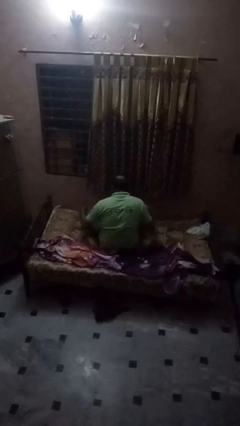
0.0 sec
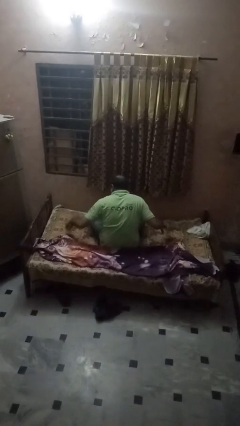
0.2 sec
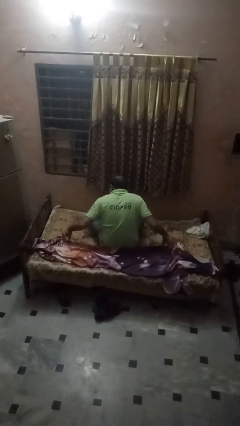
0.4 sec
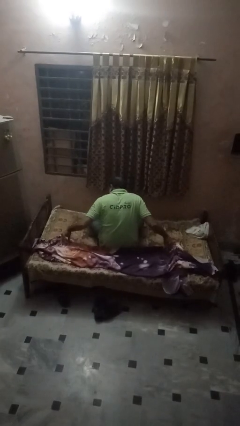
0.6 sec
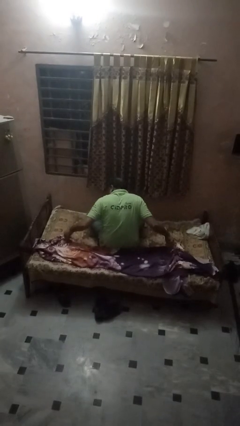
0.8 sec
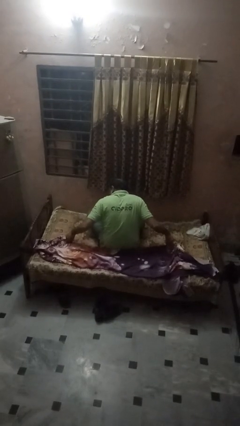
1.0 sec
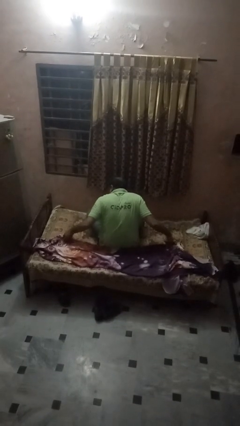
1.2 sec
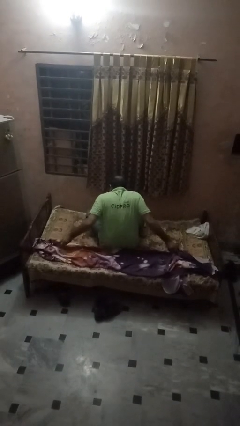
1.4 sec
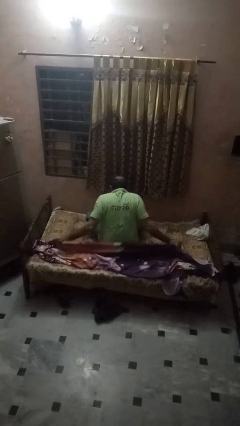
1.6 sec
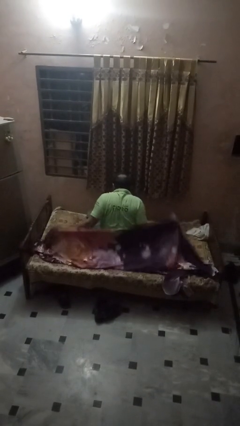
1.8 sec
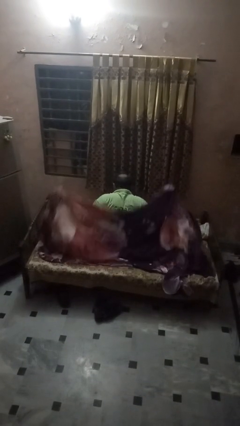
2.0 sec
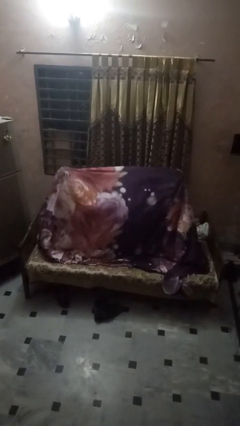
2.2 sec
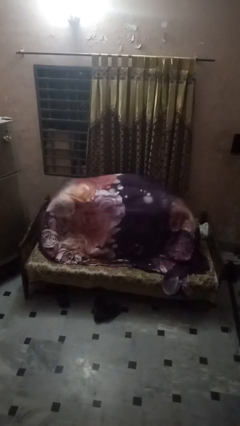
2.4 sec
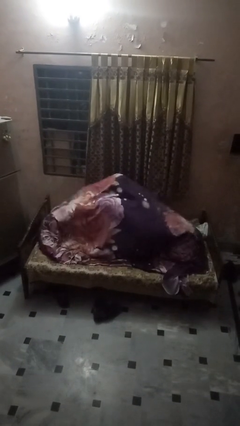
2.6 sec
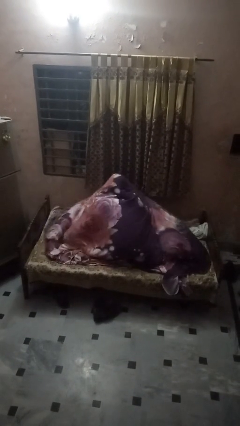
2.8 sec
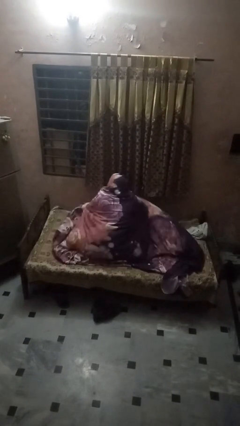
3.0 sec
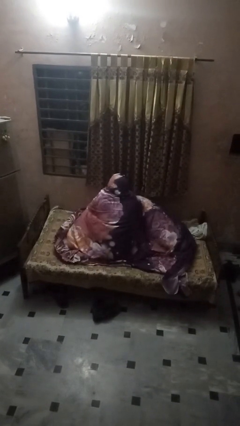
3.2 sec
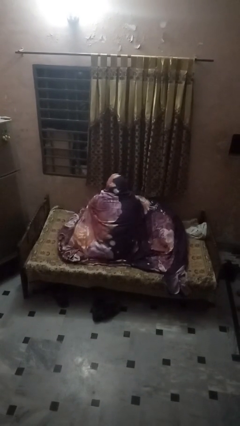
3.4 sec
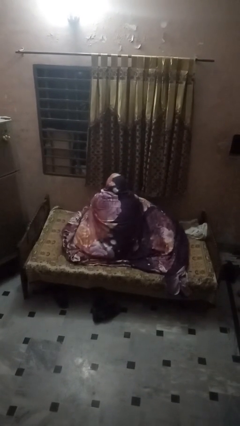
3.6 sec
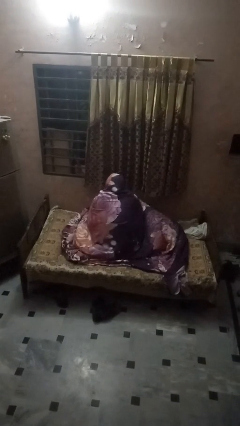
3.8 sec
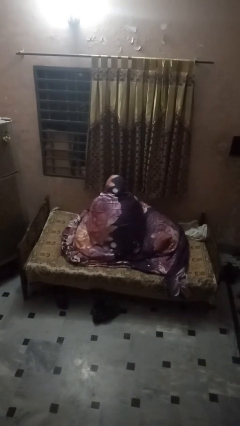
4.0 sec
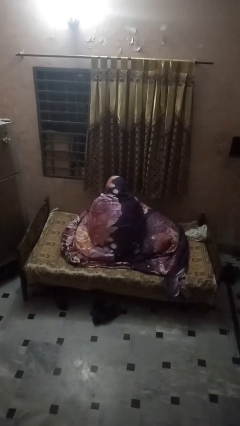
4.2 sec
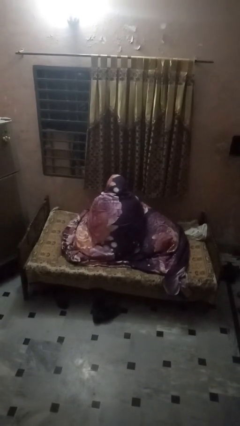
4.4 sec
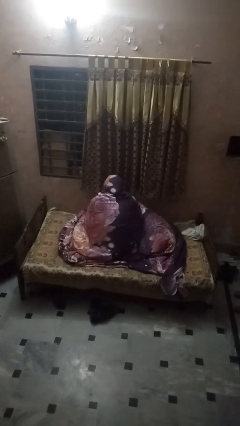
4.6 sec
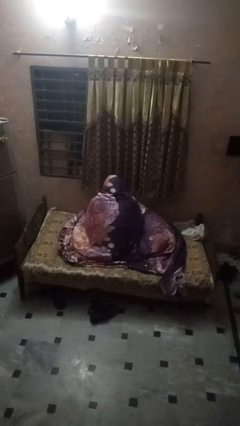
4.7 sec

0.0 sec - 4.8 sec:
person covers with bedsheets

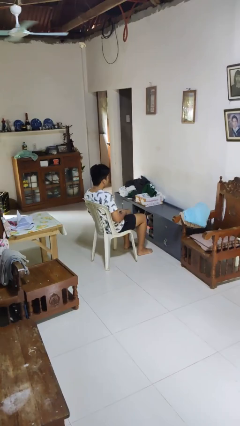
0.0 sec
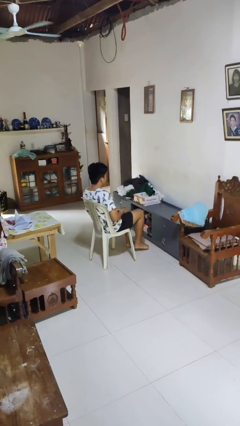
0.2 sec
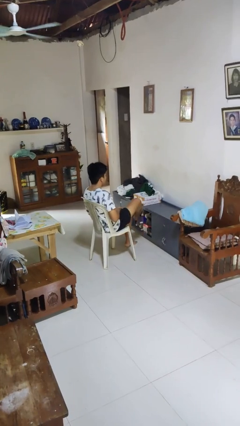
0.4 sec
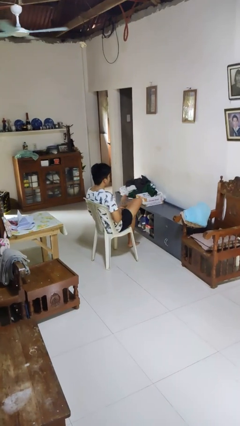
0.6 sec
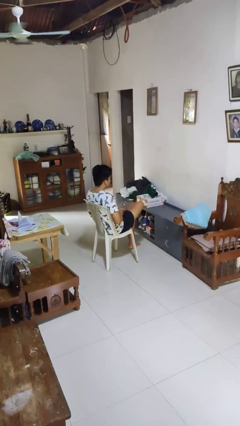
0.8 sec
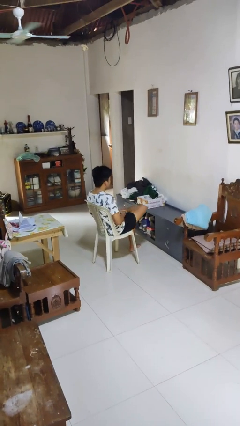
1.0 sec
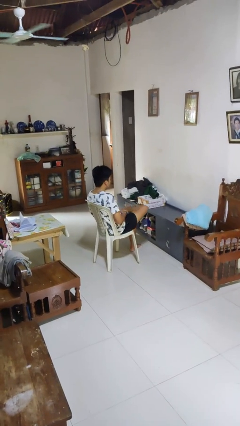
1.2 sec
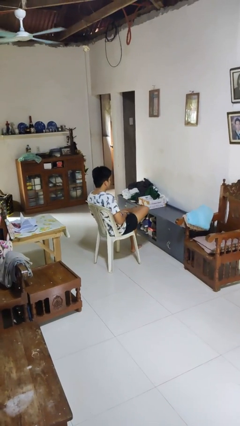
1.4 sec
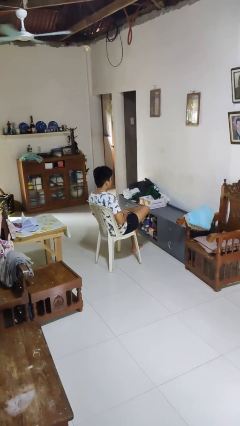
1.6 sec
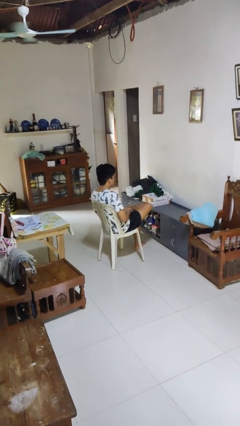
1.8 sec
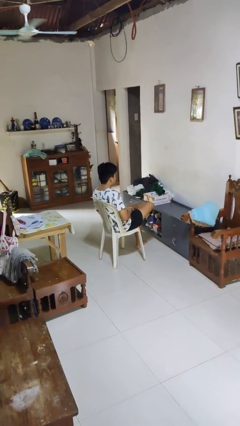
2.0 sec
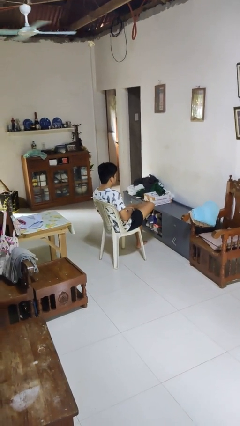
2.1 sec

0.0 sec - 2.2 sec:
person crosses legs

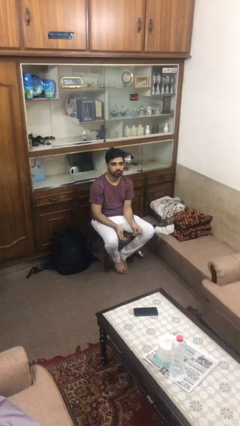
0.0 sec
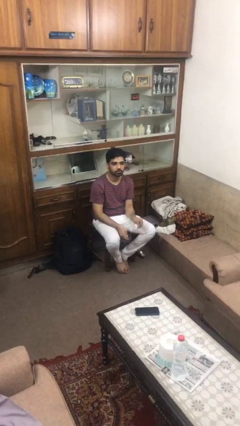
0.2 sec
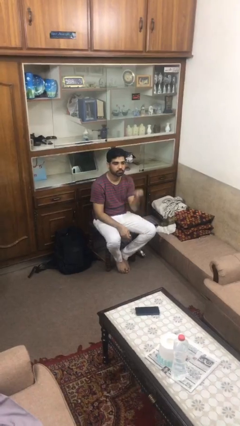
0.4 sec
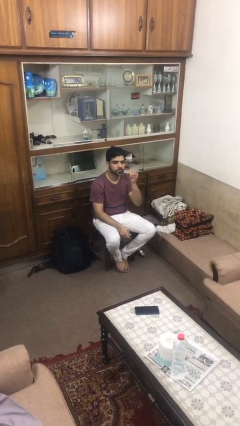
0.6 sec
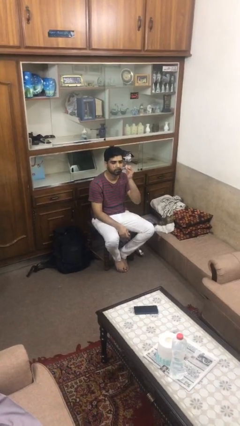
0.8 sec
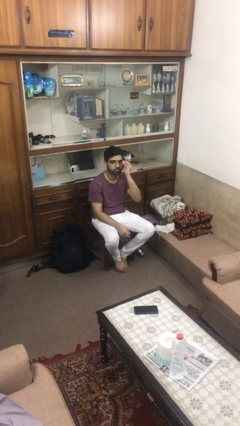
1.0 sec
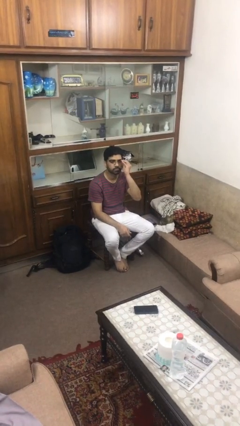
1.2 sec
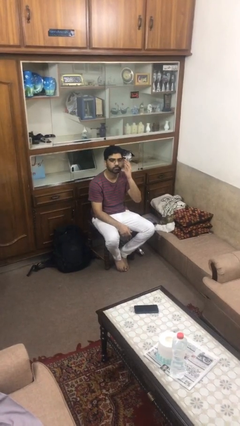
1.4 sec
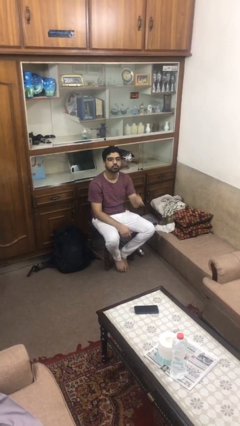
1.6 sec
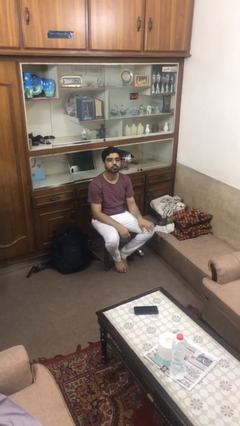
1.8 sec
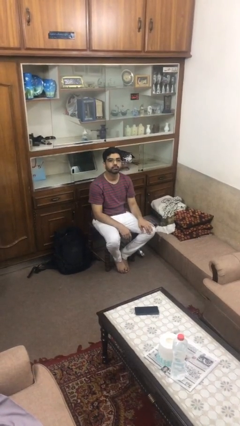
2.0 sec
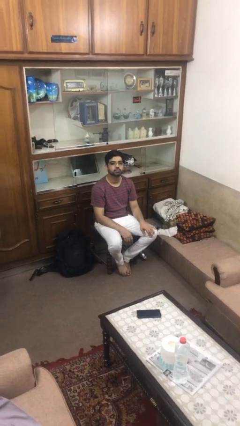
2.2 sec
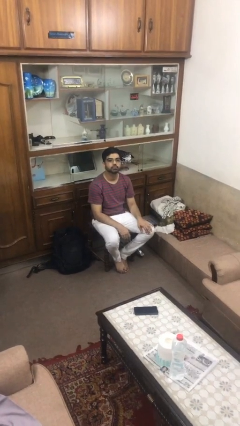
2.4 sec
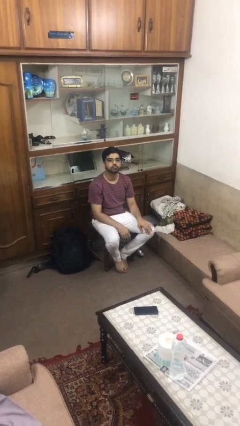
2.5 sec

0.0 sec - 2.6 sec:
person puts on glasses

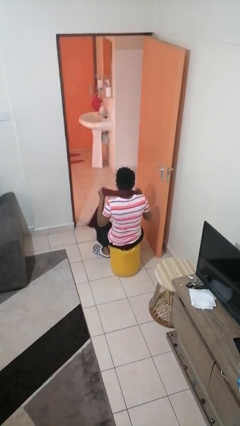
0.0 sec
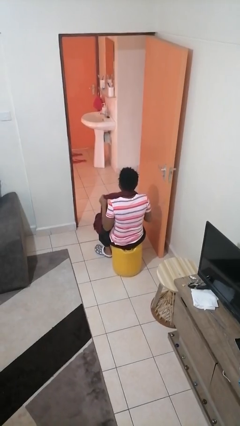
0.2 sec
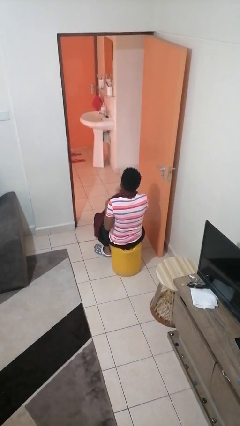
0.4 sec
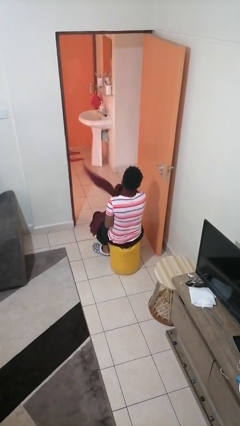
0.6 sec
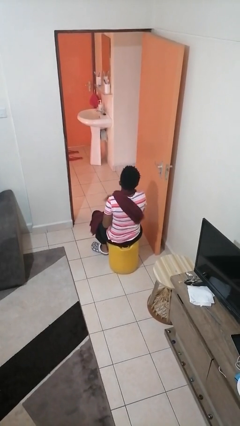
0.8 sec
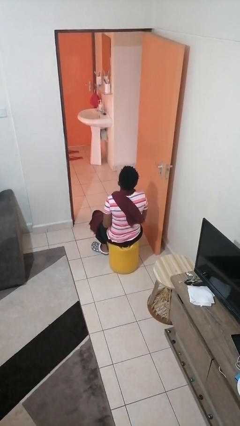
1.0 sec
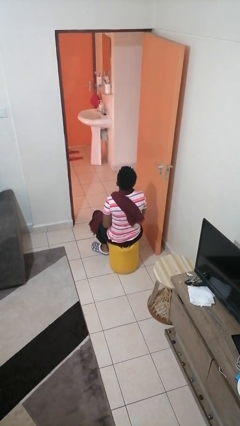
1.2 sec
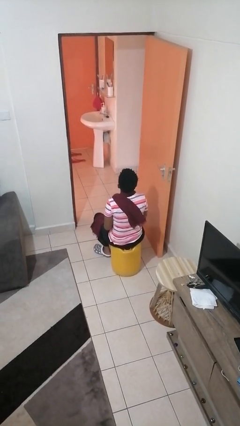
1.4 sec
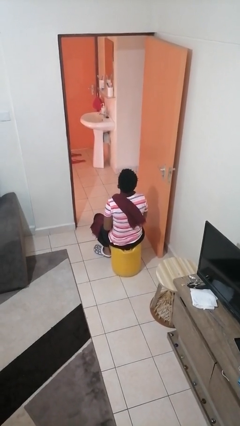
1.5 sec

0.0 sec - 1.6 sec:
person puts on scarf

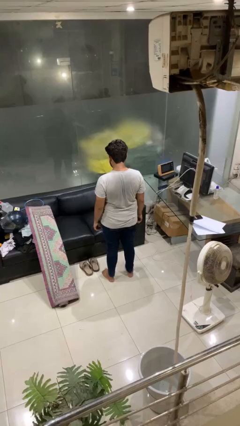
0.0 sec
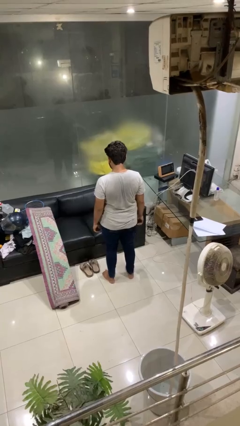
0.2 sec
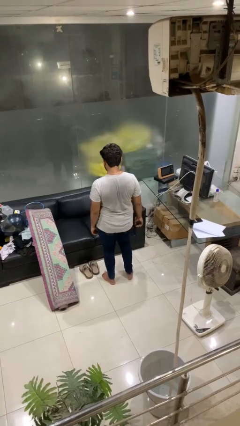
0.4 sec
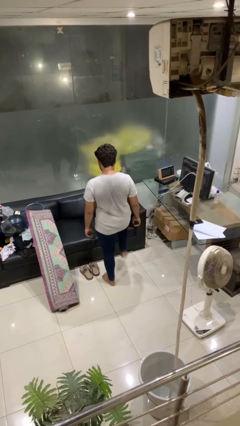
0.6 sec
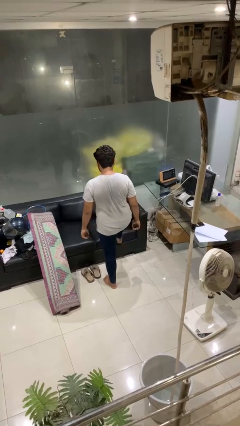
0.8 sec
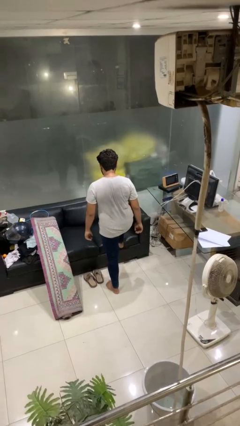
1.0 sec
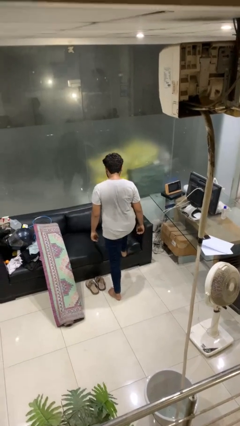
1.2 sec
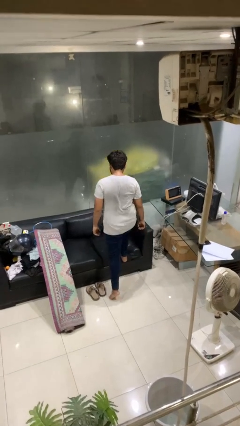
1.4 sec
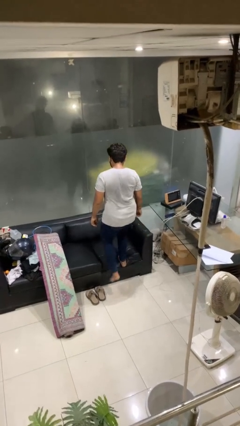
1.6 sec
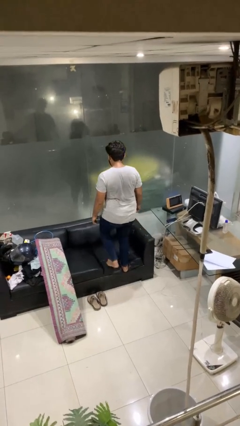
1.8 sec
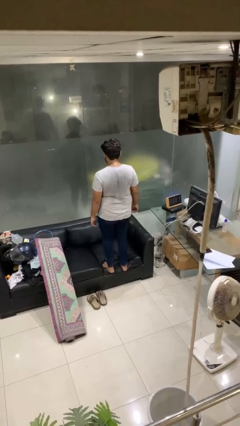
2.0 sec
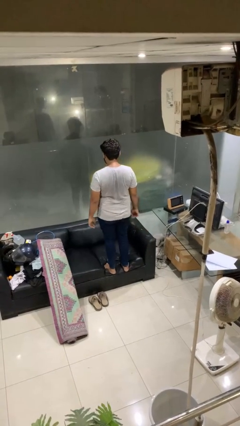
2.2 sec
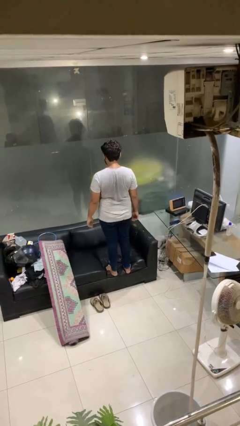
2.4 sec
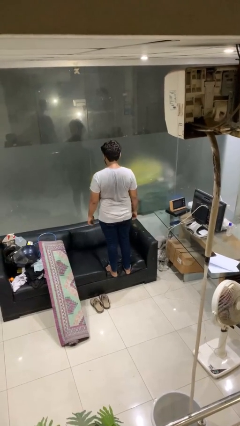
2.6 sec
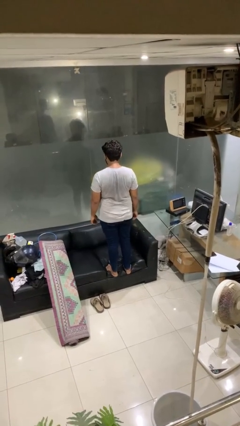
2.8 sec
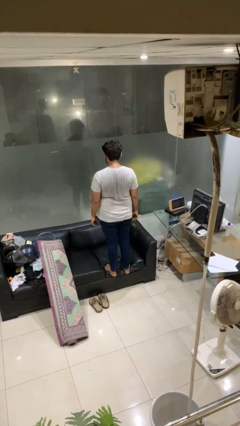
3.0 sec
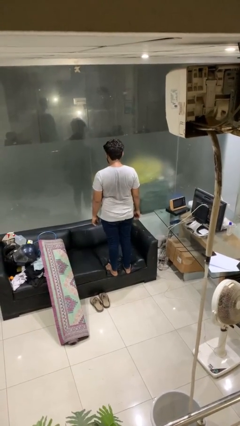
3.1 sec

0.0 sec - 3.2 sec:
person climbs on couch

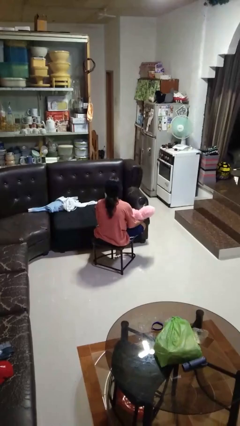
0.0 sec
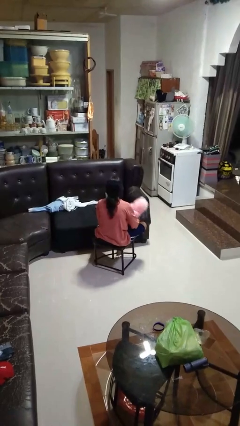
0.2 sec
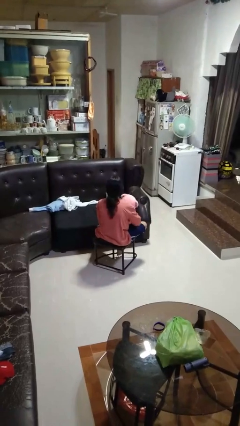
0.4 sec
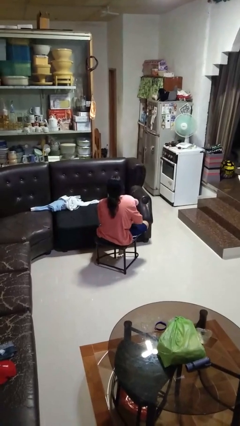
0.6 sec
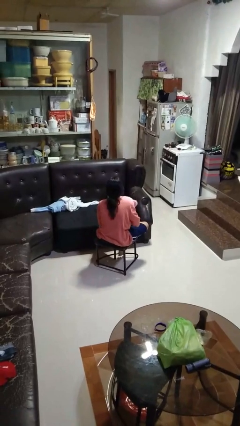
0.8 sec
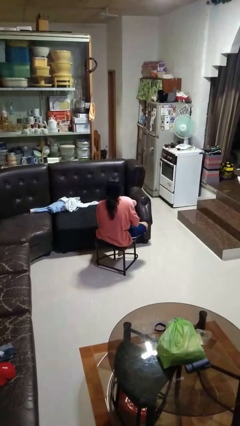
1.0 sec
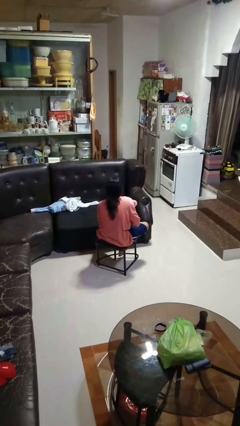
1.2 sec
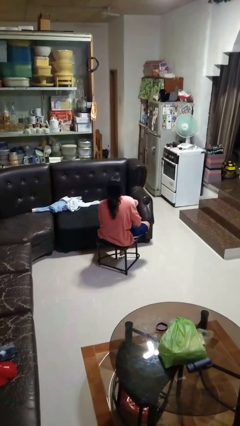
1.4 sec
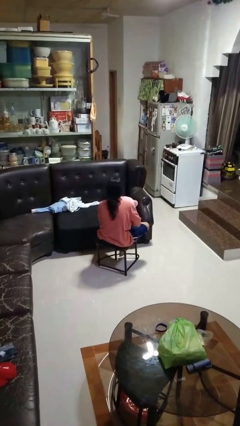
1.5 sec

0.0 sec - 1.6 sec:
person hugs stuffed animal

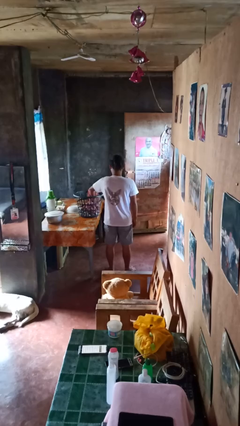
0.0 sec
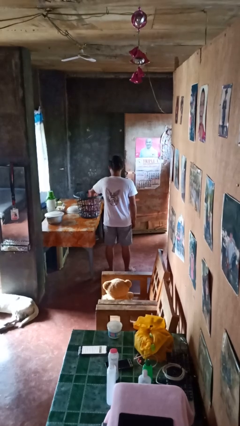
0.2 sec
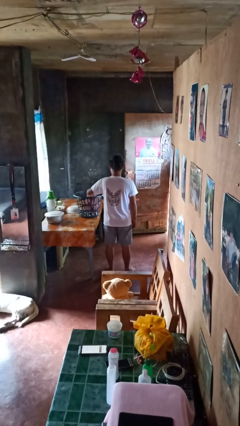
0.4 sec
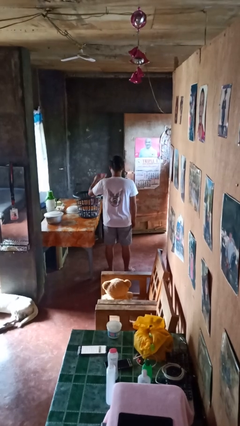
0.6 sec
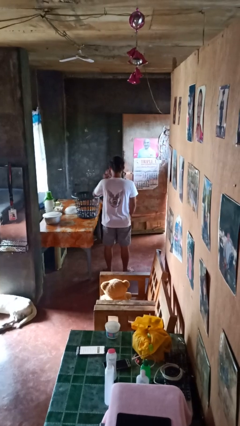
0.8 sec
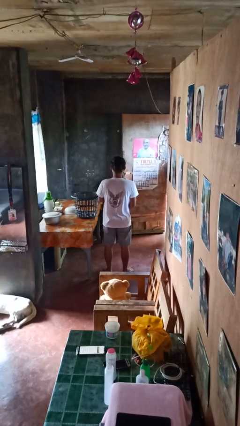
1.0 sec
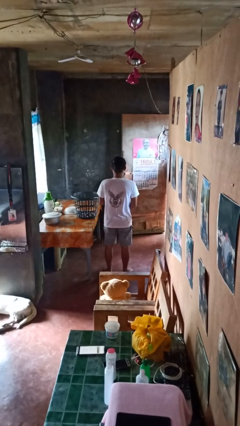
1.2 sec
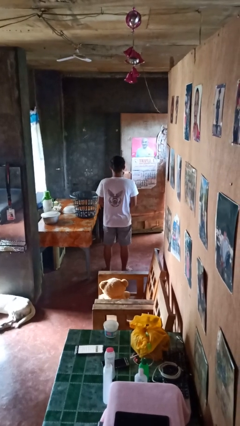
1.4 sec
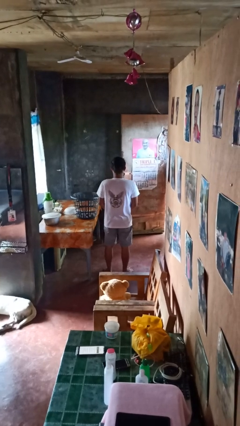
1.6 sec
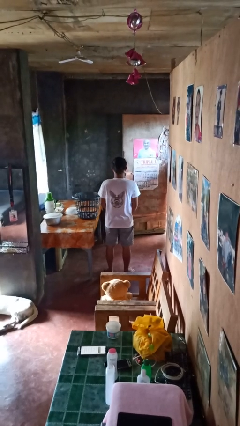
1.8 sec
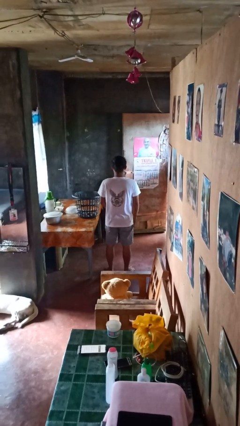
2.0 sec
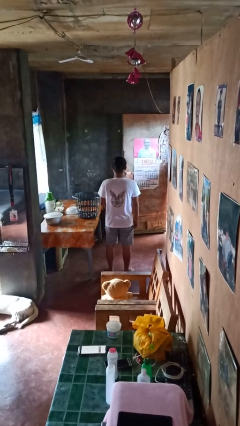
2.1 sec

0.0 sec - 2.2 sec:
person takes object from basket
